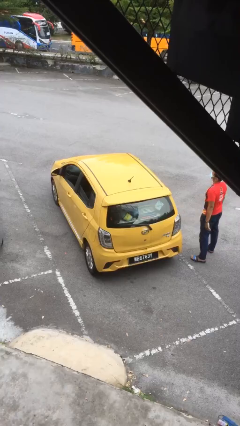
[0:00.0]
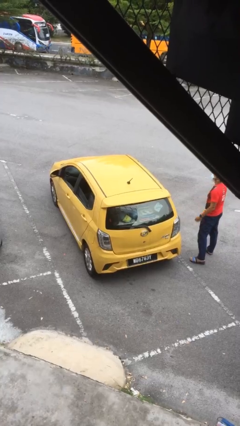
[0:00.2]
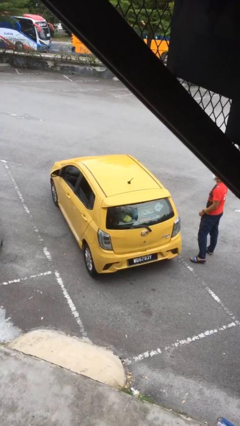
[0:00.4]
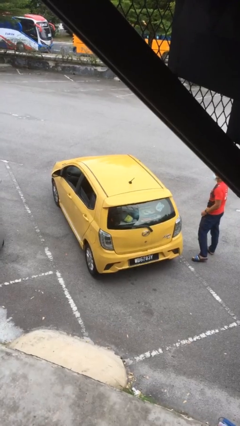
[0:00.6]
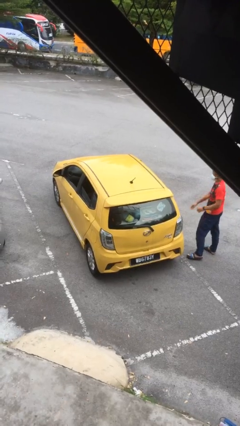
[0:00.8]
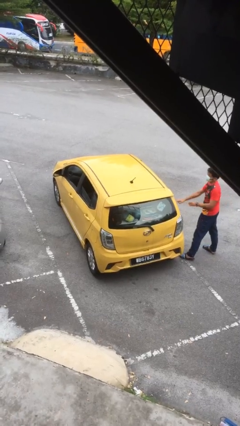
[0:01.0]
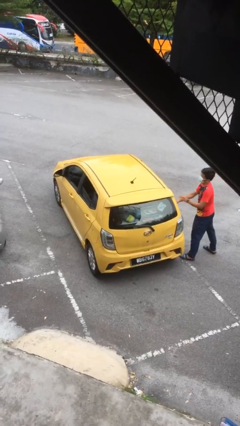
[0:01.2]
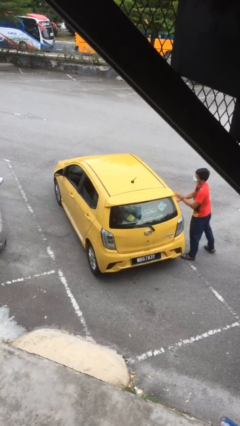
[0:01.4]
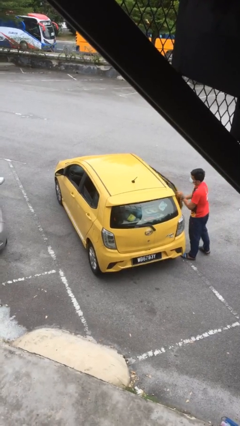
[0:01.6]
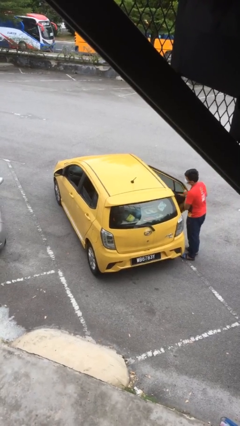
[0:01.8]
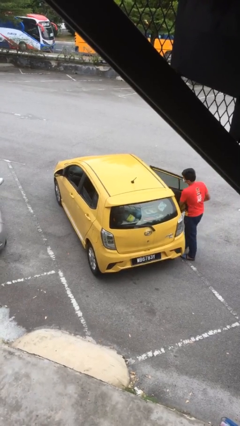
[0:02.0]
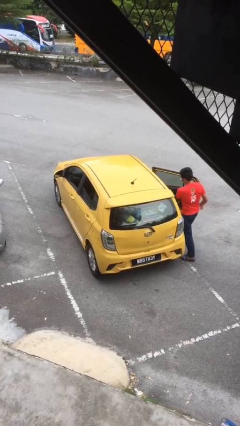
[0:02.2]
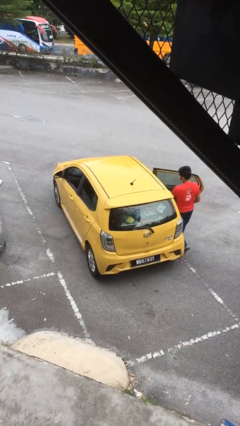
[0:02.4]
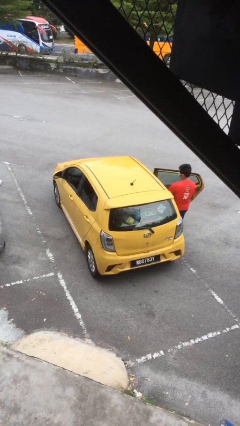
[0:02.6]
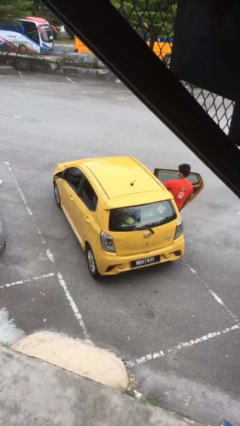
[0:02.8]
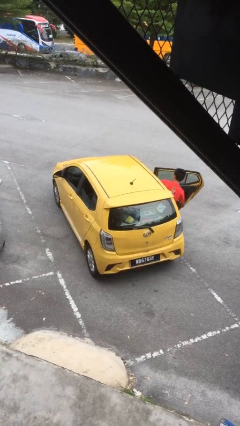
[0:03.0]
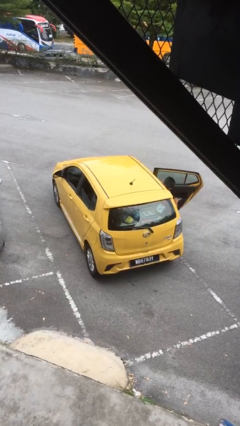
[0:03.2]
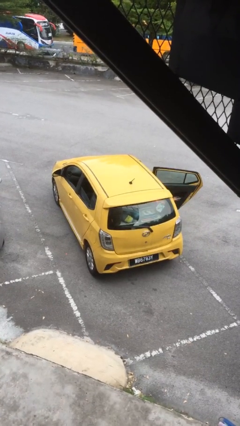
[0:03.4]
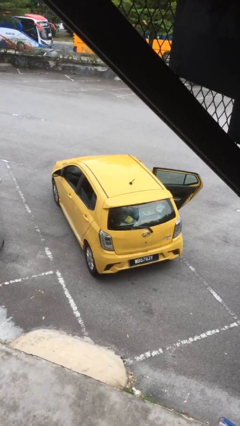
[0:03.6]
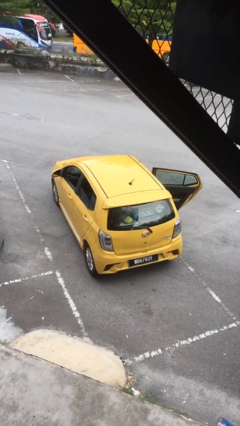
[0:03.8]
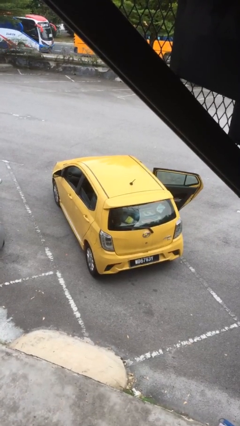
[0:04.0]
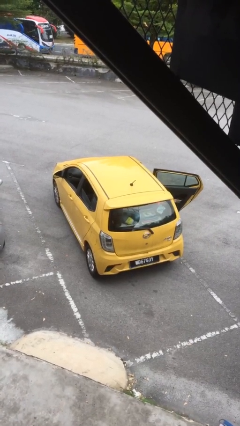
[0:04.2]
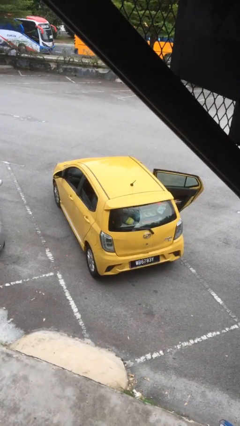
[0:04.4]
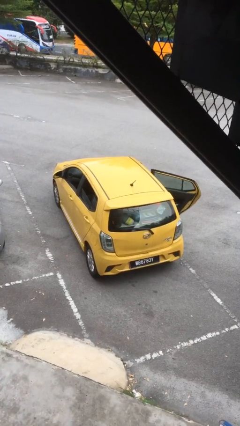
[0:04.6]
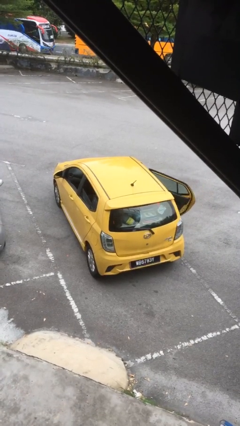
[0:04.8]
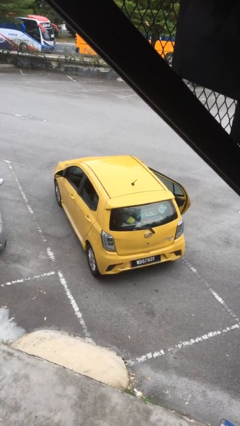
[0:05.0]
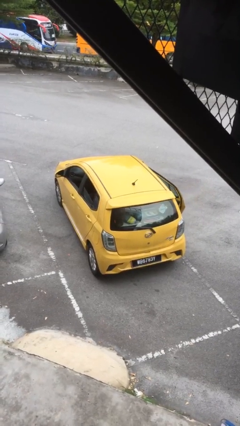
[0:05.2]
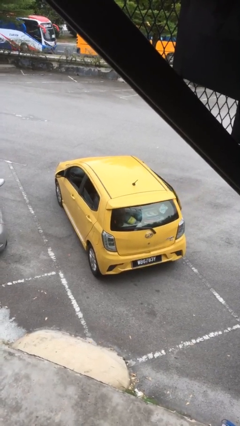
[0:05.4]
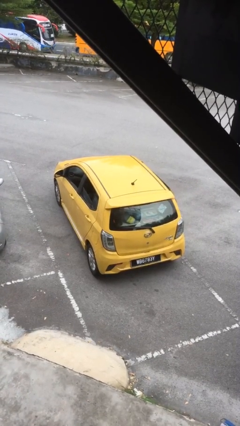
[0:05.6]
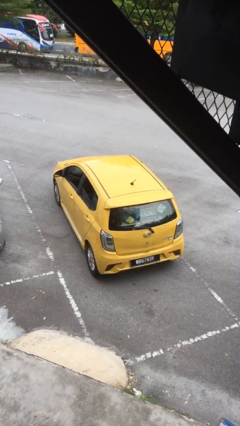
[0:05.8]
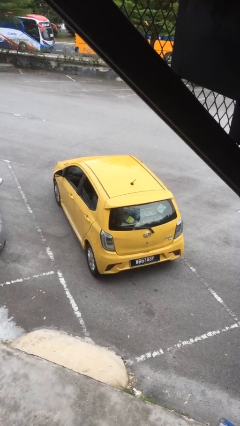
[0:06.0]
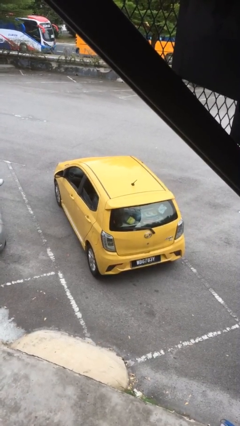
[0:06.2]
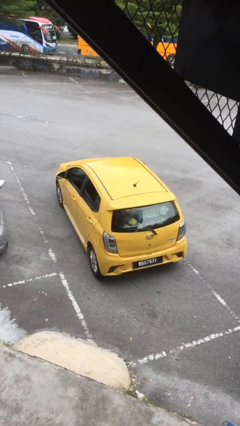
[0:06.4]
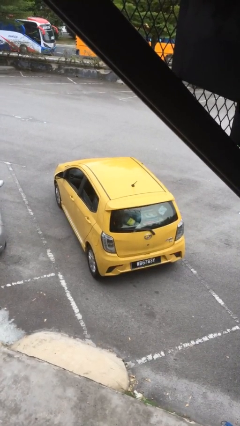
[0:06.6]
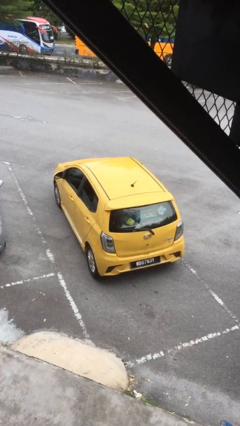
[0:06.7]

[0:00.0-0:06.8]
car picks up person

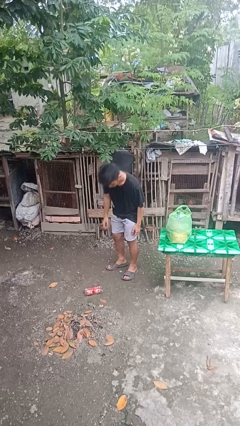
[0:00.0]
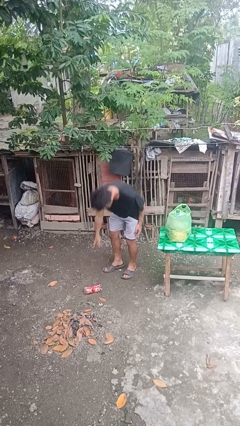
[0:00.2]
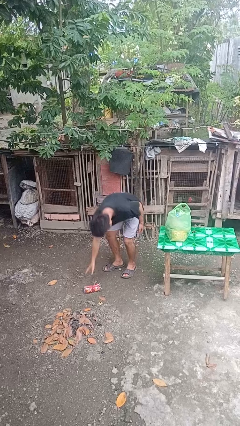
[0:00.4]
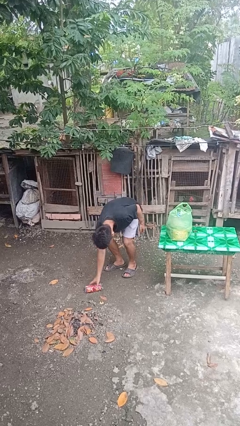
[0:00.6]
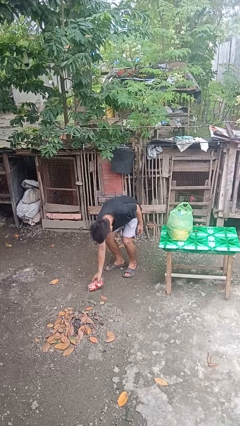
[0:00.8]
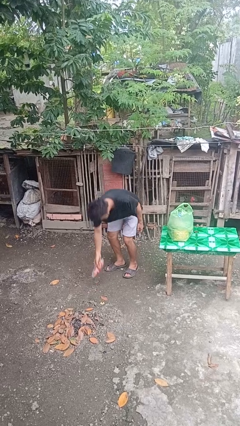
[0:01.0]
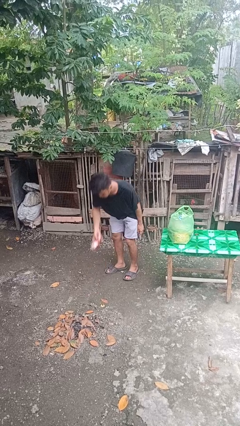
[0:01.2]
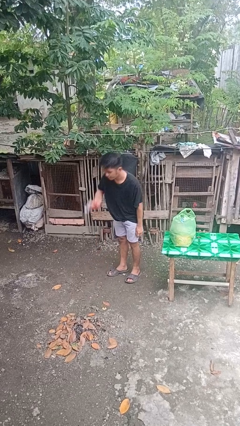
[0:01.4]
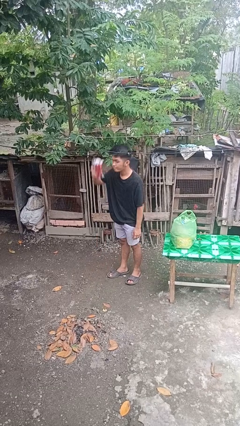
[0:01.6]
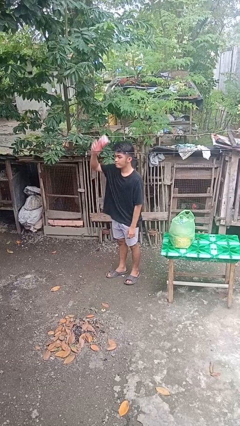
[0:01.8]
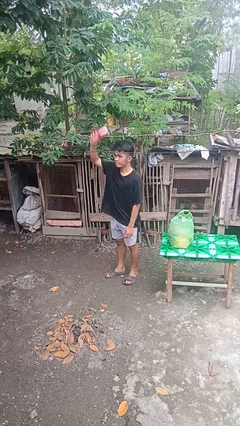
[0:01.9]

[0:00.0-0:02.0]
person picks up object from floor

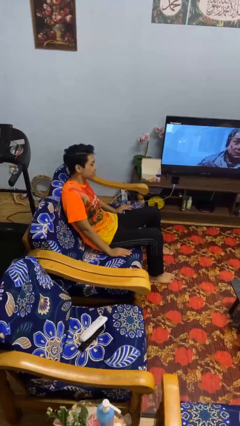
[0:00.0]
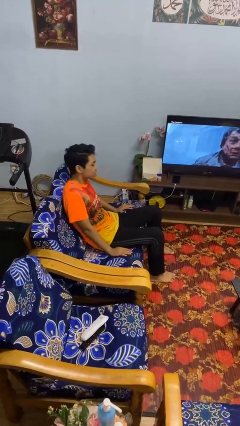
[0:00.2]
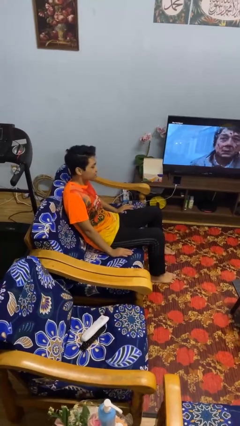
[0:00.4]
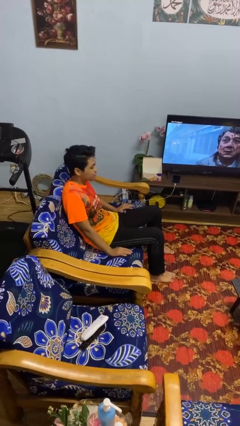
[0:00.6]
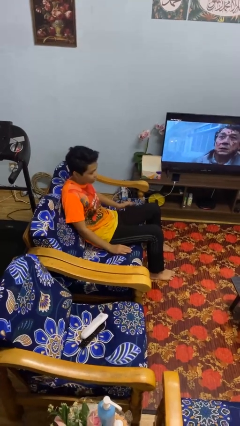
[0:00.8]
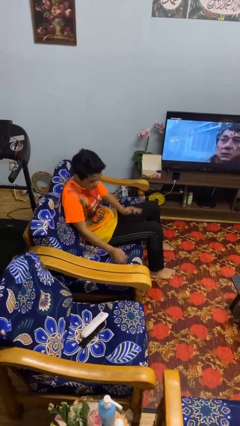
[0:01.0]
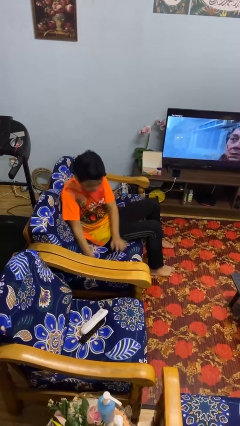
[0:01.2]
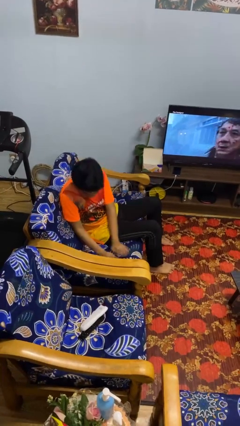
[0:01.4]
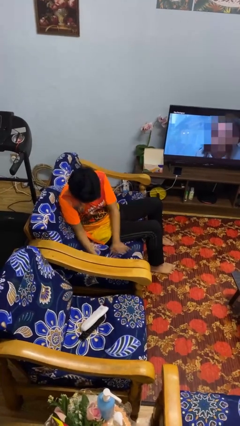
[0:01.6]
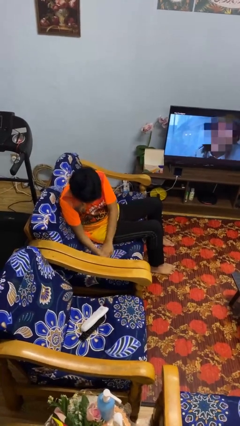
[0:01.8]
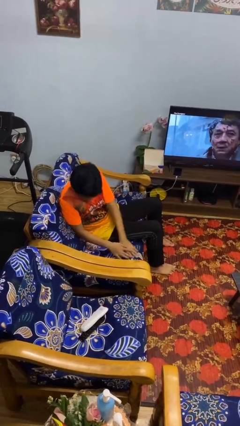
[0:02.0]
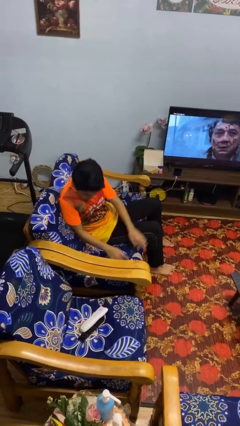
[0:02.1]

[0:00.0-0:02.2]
person searches in couch

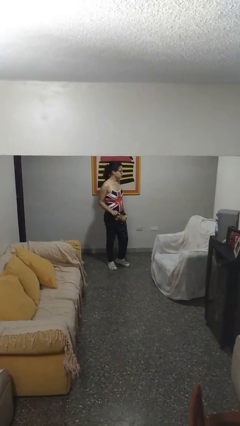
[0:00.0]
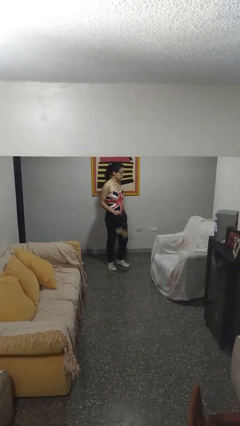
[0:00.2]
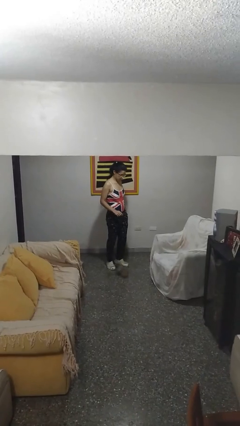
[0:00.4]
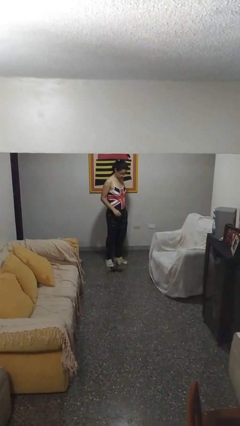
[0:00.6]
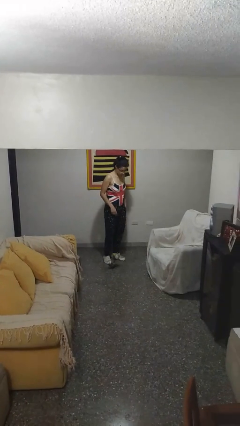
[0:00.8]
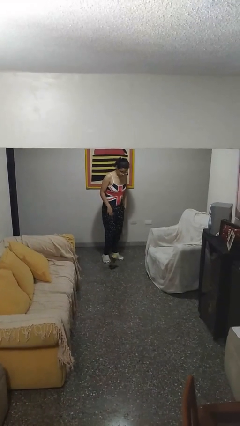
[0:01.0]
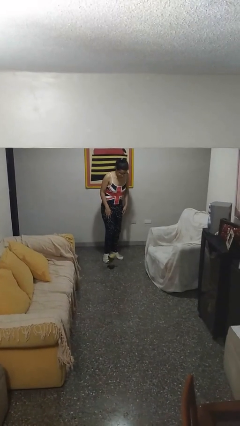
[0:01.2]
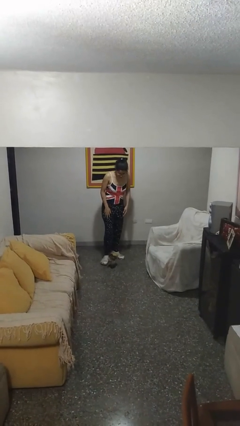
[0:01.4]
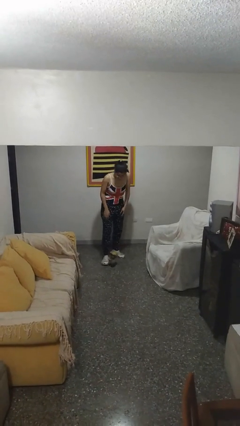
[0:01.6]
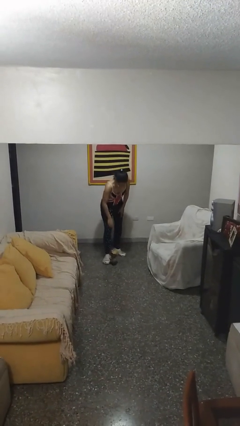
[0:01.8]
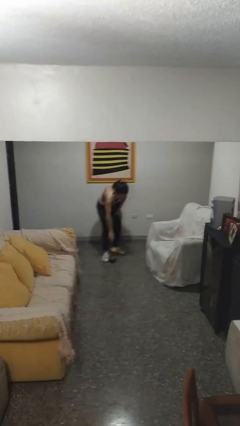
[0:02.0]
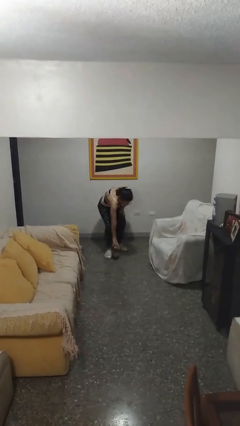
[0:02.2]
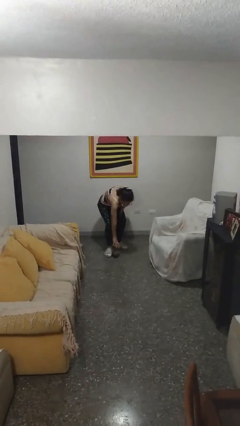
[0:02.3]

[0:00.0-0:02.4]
person drops object

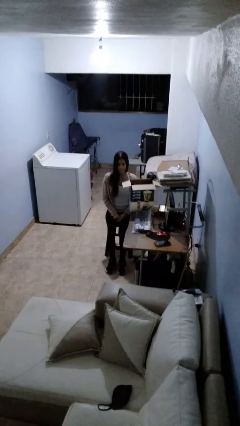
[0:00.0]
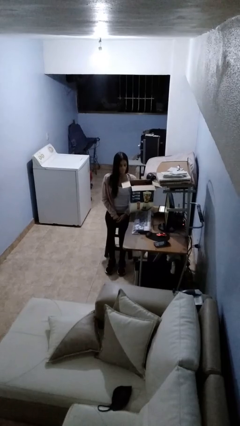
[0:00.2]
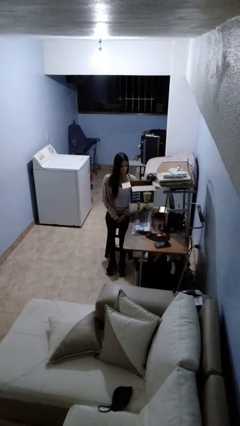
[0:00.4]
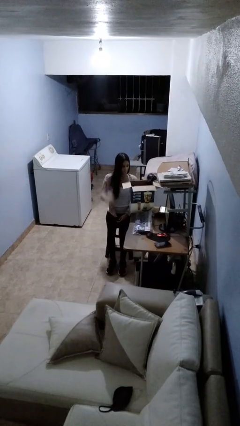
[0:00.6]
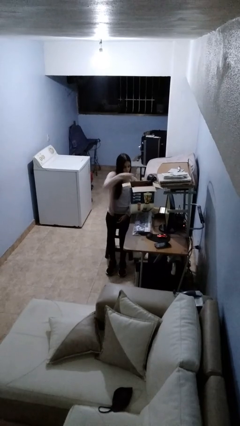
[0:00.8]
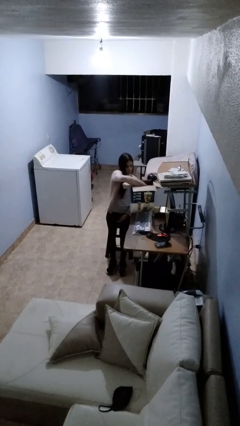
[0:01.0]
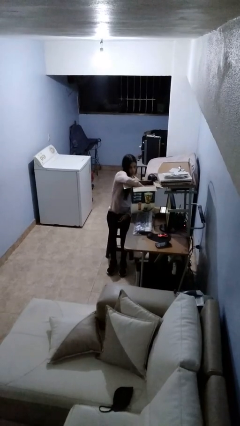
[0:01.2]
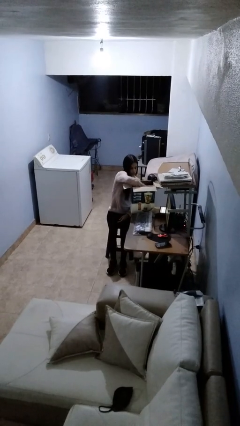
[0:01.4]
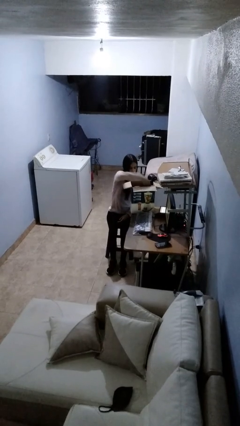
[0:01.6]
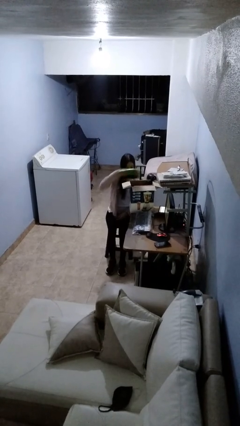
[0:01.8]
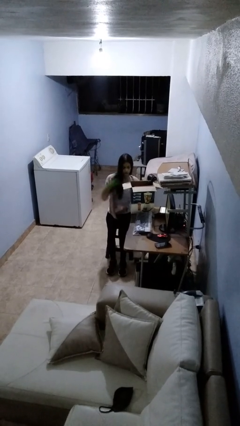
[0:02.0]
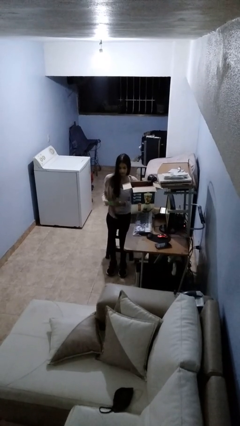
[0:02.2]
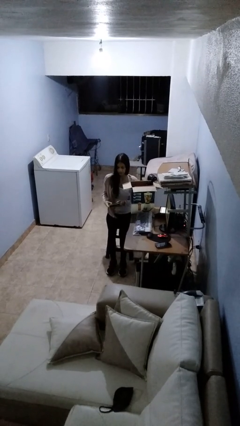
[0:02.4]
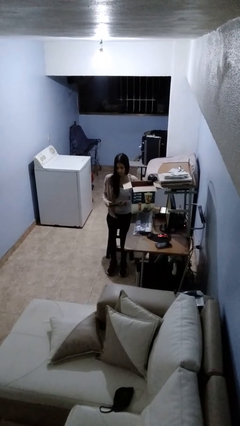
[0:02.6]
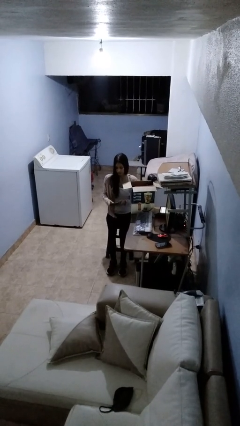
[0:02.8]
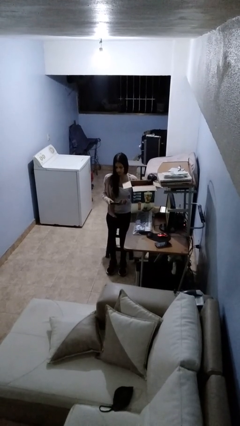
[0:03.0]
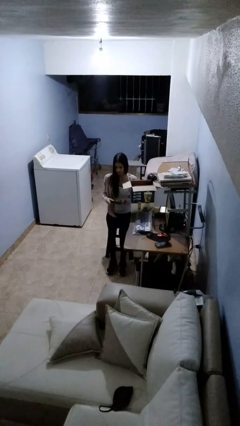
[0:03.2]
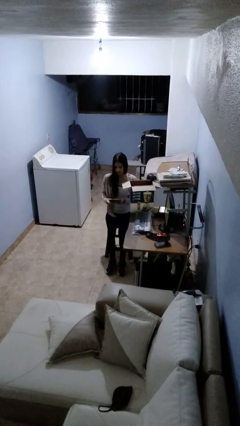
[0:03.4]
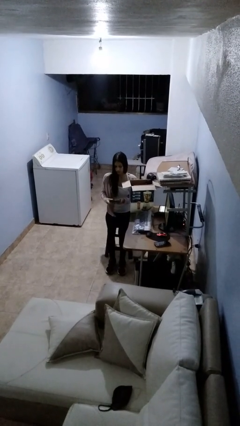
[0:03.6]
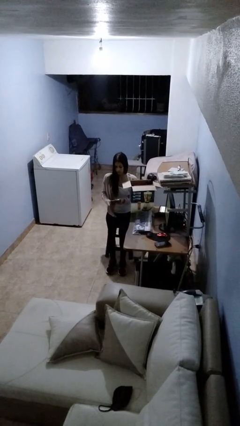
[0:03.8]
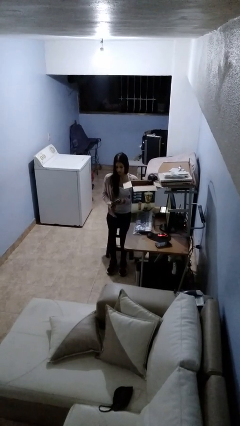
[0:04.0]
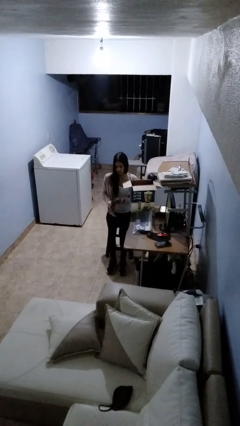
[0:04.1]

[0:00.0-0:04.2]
person takes object from box
